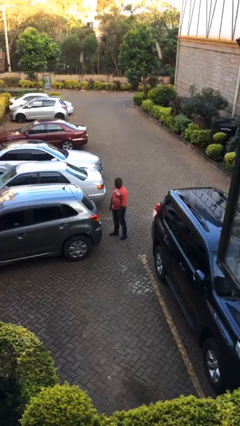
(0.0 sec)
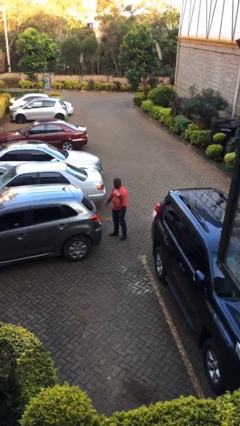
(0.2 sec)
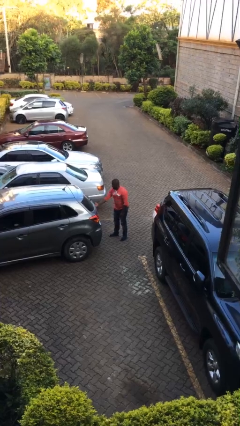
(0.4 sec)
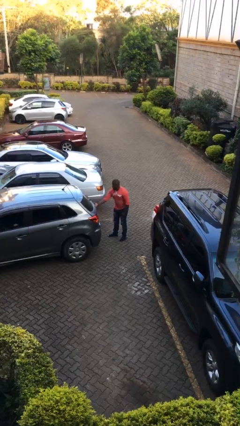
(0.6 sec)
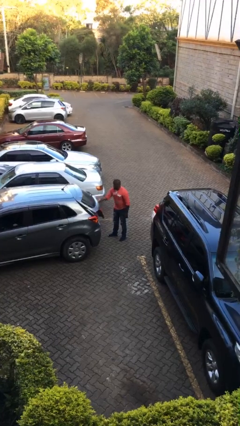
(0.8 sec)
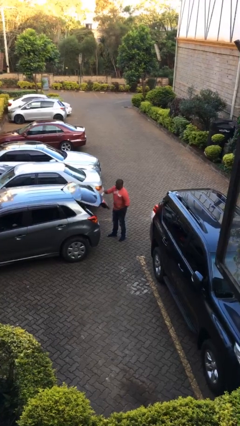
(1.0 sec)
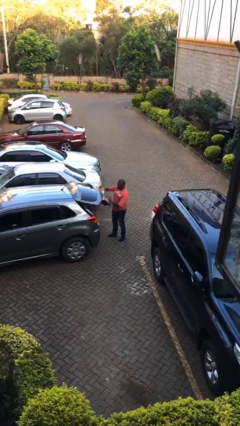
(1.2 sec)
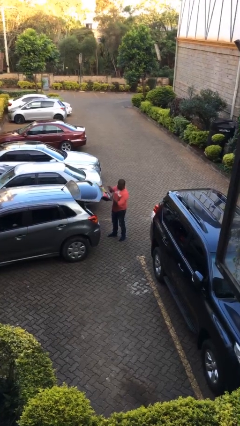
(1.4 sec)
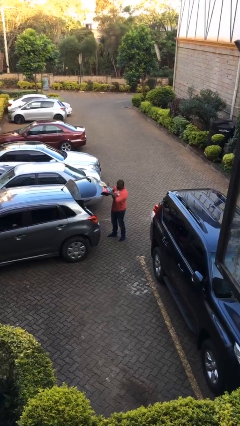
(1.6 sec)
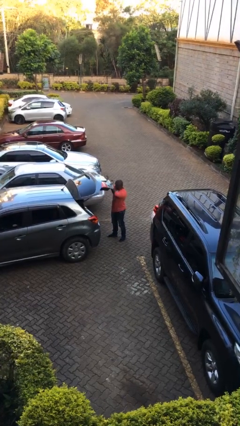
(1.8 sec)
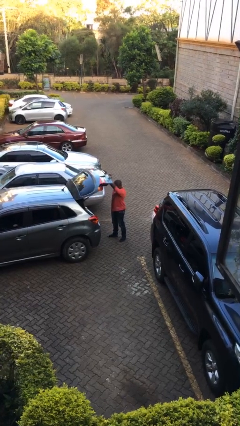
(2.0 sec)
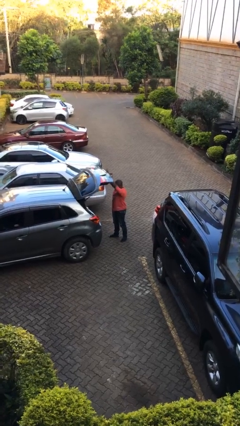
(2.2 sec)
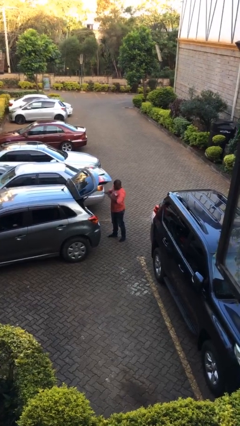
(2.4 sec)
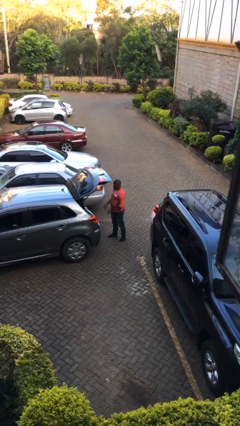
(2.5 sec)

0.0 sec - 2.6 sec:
person opens car trunk

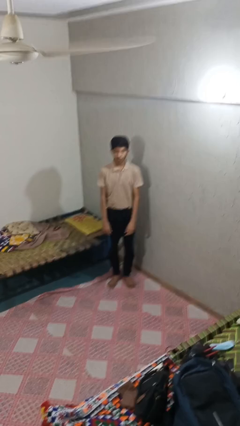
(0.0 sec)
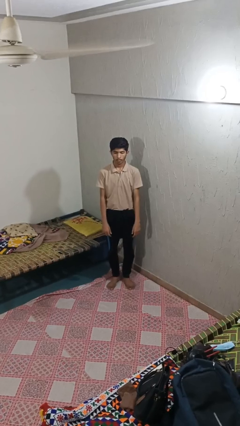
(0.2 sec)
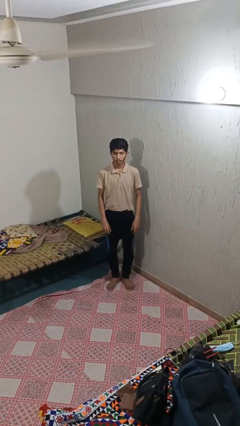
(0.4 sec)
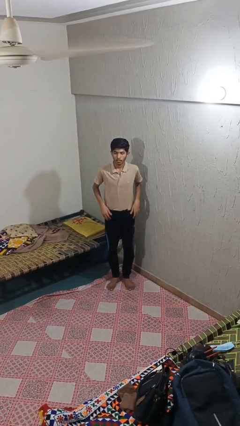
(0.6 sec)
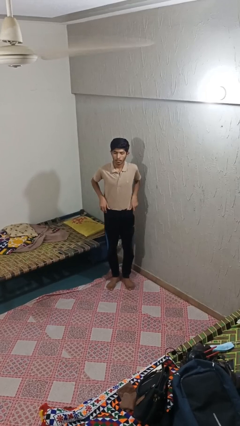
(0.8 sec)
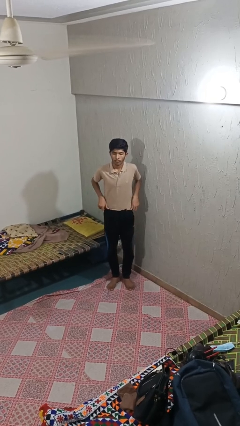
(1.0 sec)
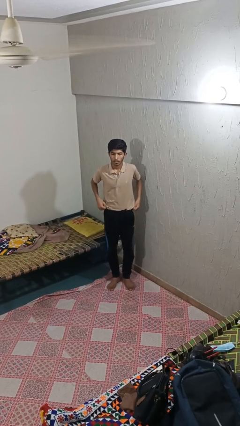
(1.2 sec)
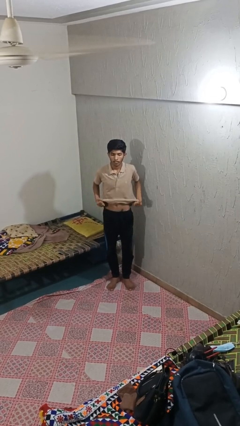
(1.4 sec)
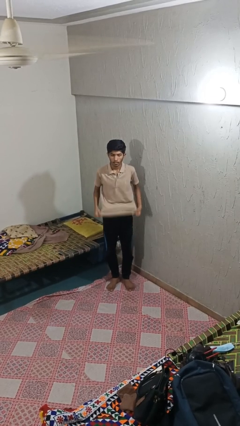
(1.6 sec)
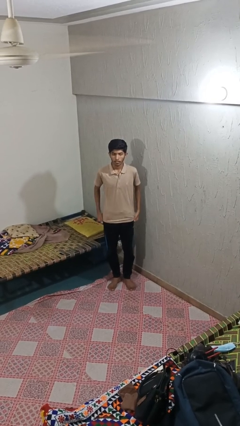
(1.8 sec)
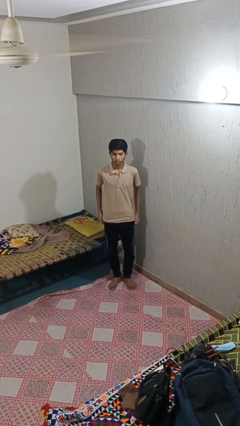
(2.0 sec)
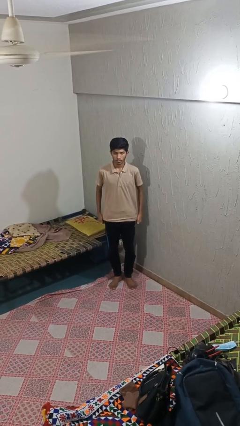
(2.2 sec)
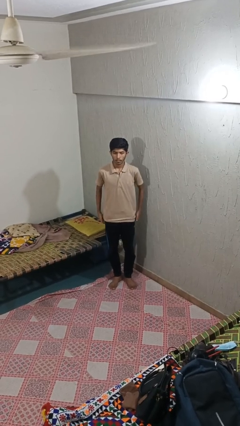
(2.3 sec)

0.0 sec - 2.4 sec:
person untucks shirt

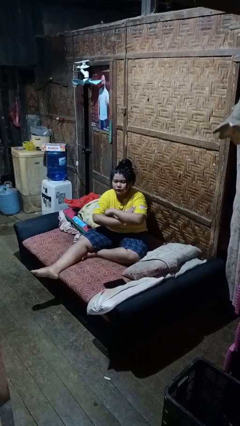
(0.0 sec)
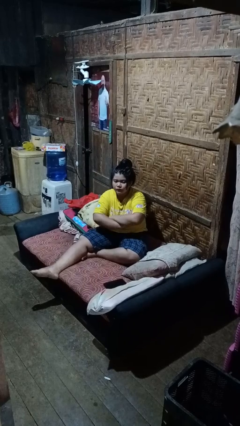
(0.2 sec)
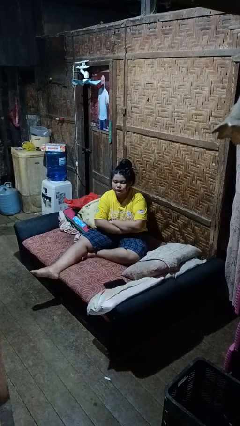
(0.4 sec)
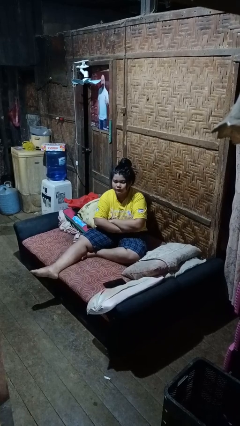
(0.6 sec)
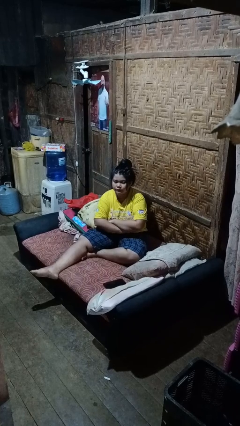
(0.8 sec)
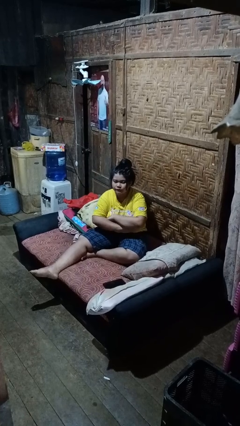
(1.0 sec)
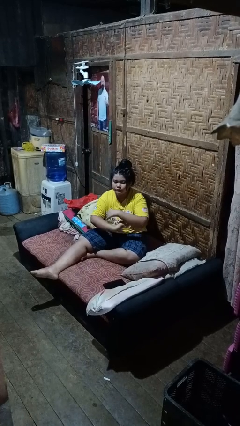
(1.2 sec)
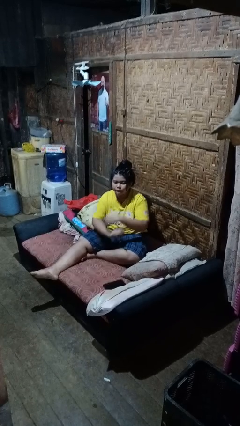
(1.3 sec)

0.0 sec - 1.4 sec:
person gestures arms x

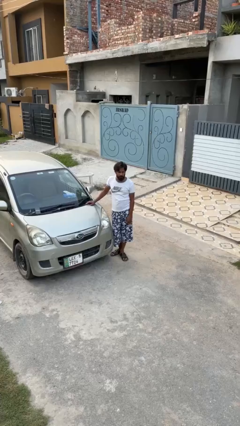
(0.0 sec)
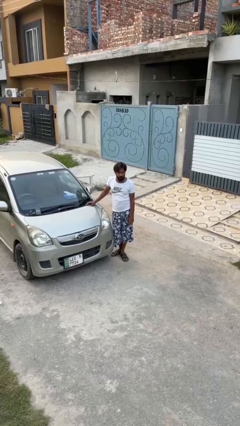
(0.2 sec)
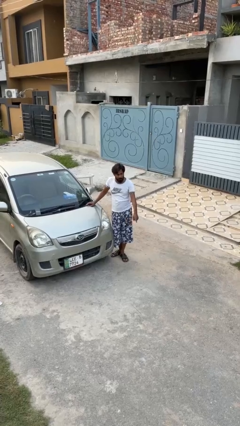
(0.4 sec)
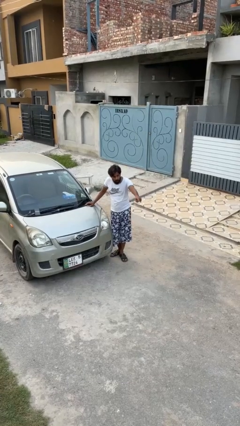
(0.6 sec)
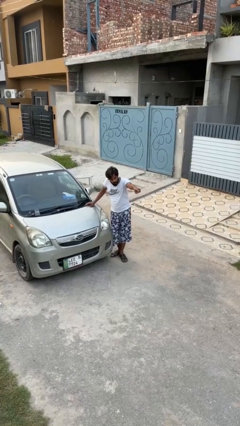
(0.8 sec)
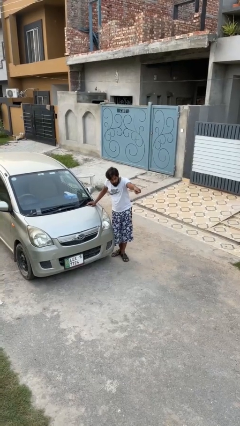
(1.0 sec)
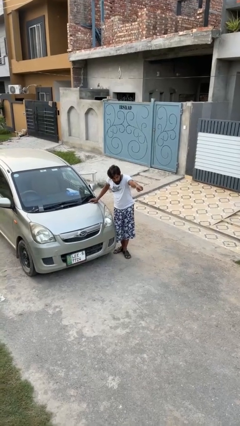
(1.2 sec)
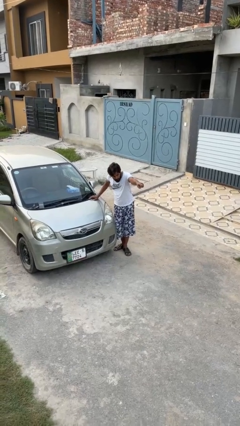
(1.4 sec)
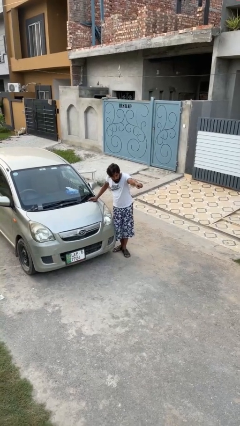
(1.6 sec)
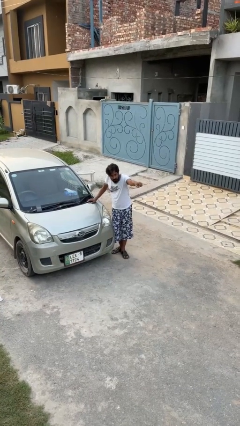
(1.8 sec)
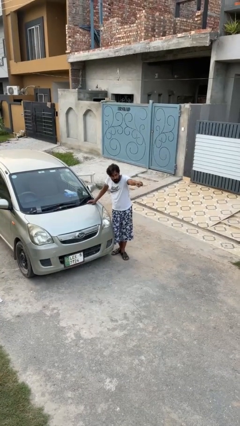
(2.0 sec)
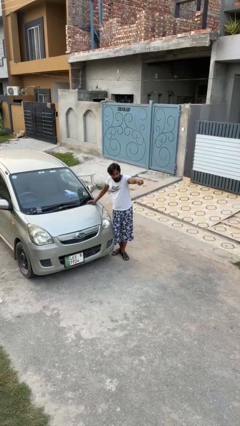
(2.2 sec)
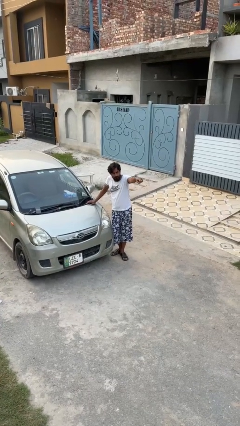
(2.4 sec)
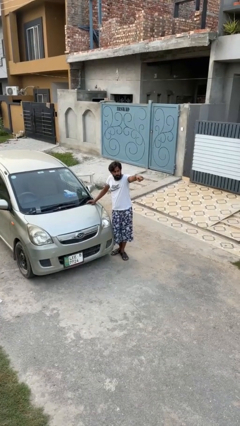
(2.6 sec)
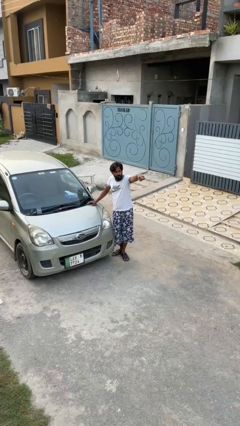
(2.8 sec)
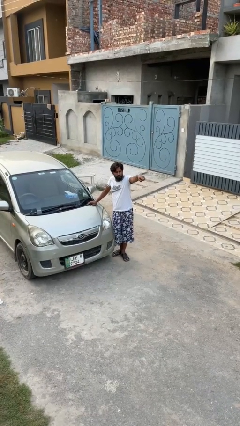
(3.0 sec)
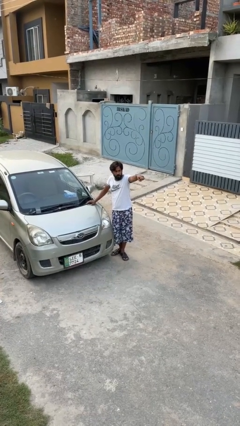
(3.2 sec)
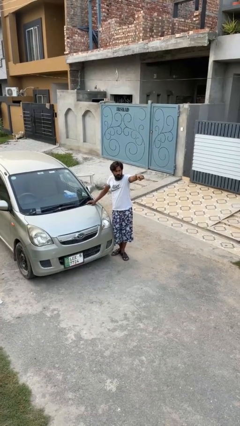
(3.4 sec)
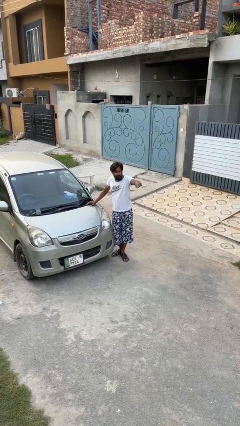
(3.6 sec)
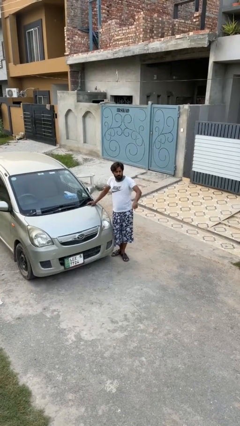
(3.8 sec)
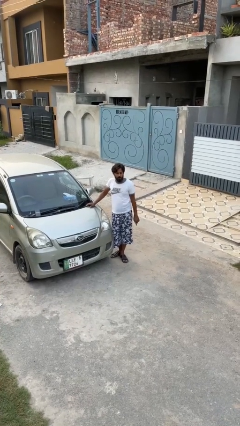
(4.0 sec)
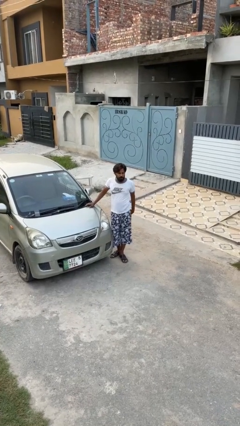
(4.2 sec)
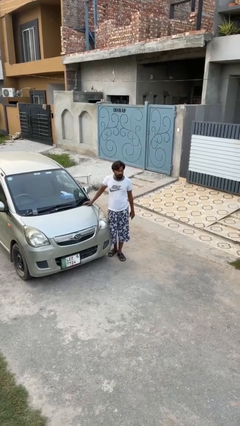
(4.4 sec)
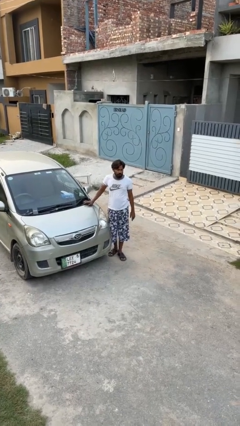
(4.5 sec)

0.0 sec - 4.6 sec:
person points at person

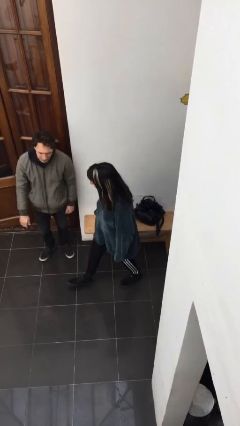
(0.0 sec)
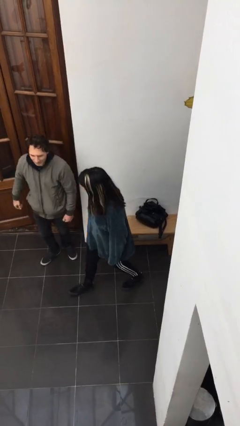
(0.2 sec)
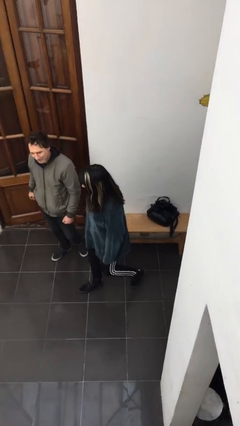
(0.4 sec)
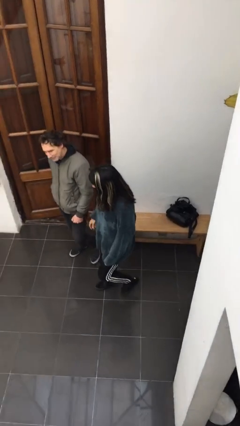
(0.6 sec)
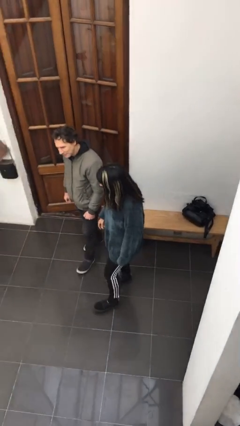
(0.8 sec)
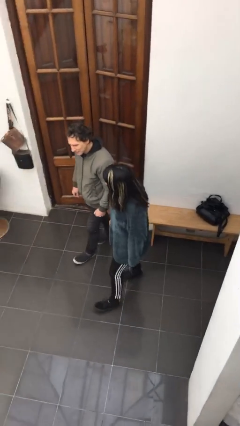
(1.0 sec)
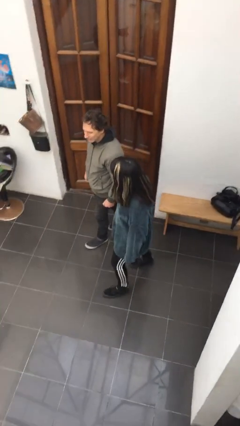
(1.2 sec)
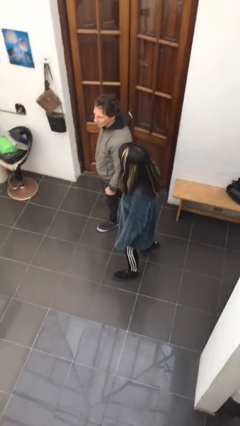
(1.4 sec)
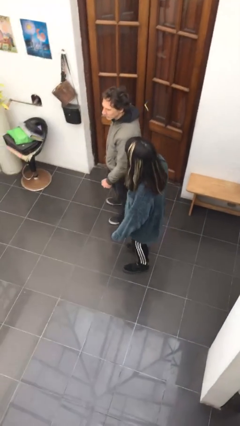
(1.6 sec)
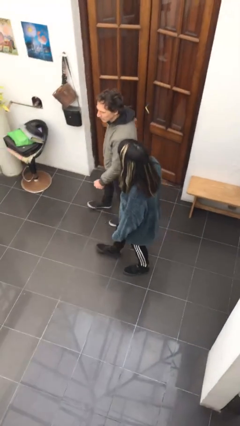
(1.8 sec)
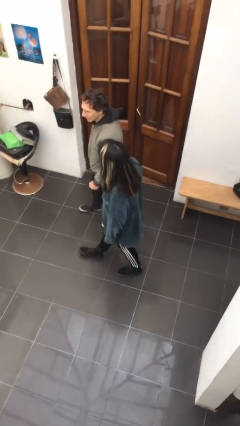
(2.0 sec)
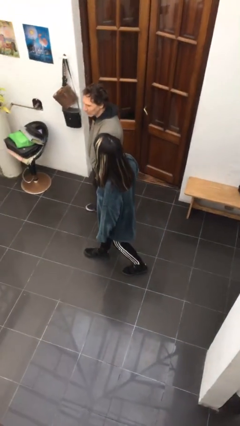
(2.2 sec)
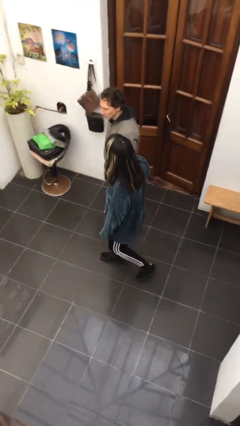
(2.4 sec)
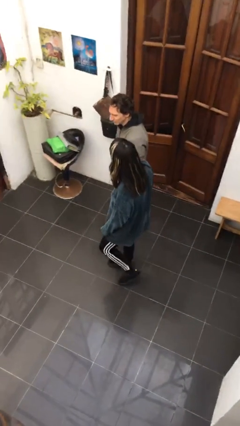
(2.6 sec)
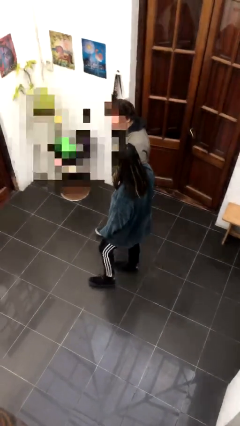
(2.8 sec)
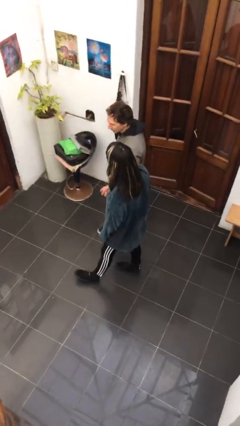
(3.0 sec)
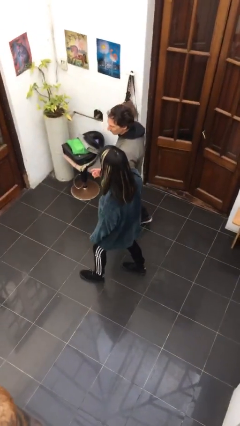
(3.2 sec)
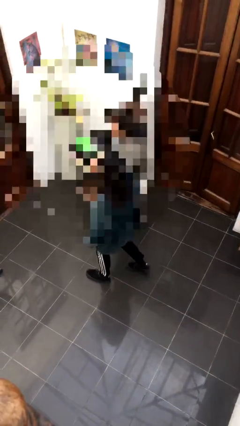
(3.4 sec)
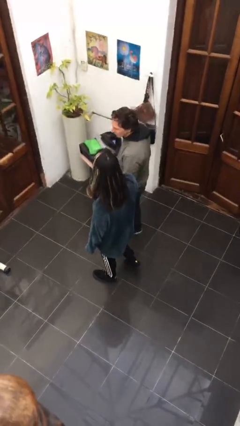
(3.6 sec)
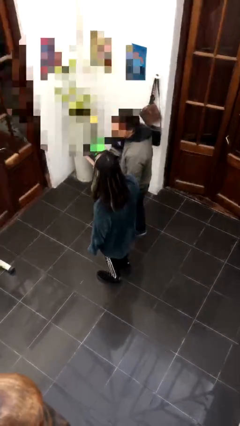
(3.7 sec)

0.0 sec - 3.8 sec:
person talks to person

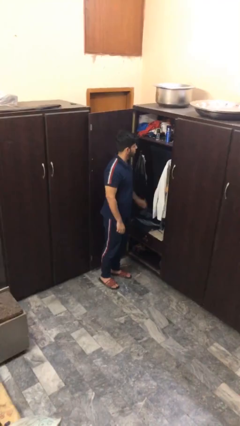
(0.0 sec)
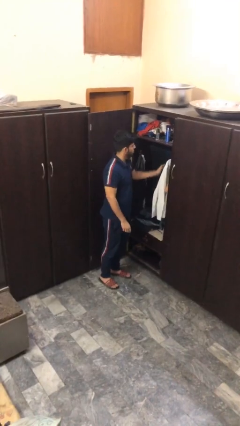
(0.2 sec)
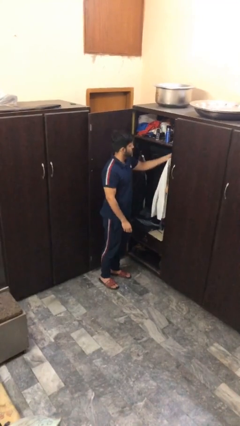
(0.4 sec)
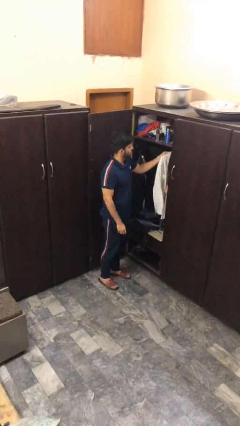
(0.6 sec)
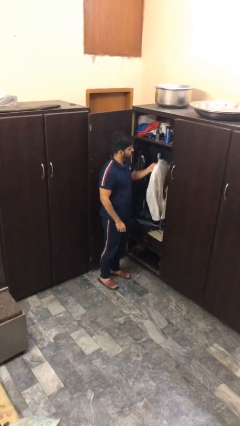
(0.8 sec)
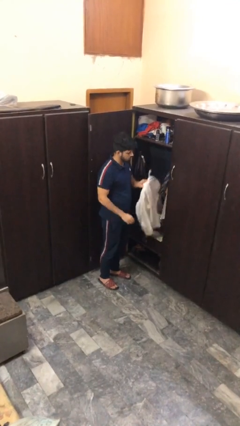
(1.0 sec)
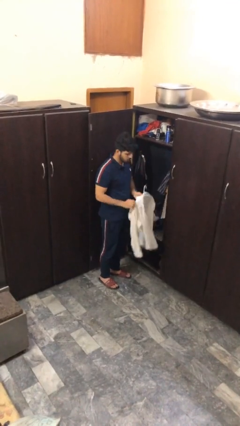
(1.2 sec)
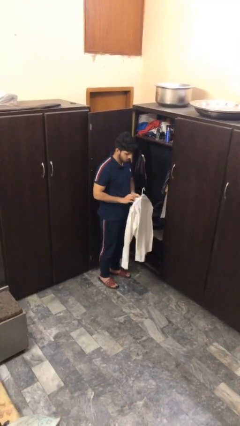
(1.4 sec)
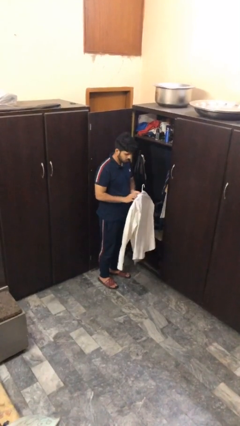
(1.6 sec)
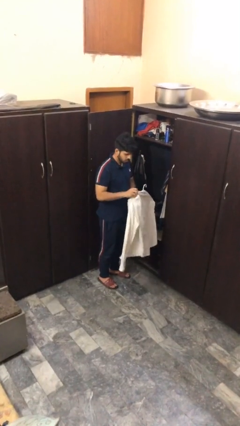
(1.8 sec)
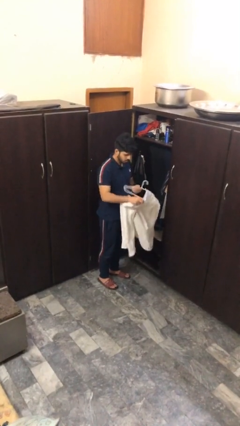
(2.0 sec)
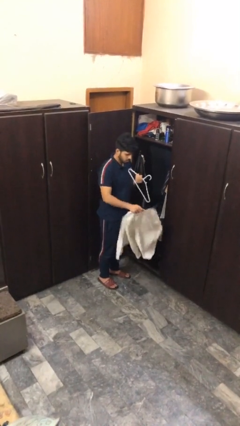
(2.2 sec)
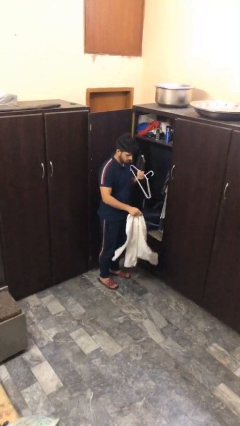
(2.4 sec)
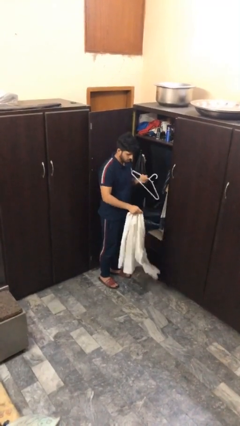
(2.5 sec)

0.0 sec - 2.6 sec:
person takes clothes from closet
